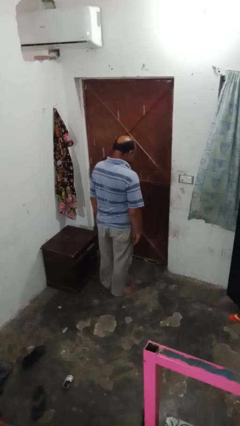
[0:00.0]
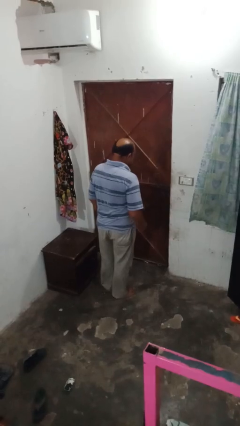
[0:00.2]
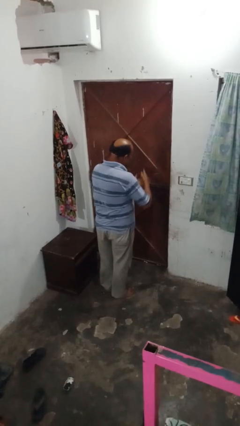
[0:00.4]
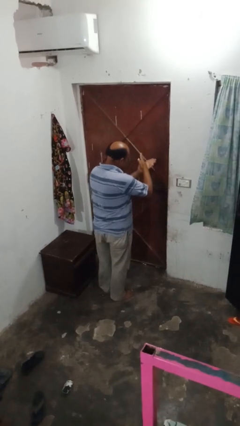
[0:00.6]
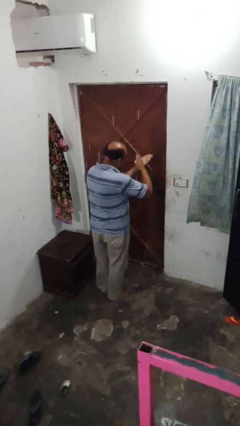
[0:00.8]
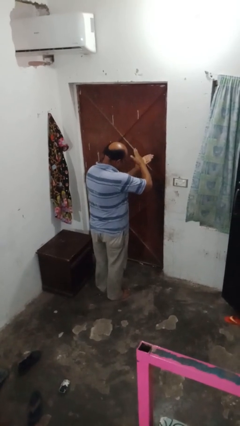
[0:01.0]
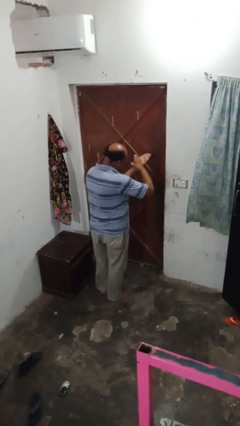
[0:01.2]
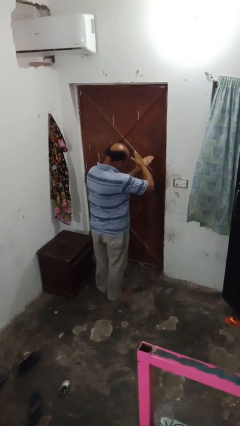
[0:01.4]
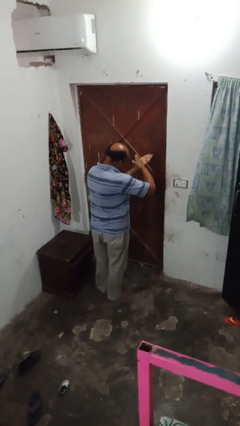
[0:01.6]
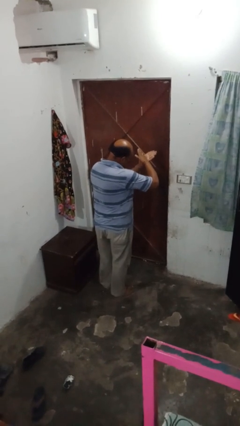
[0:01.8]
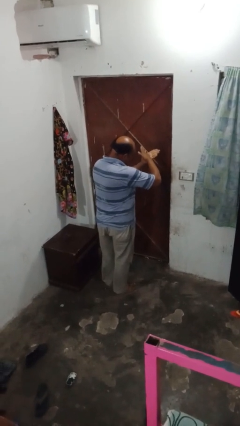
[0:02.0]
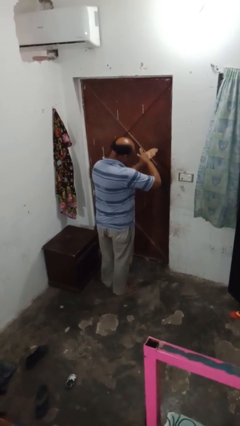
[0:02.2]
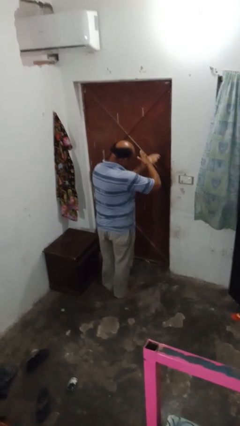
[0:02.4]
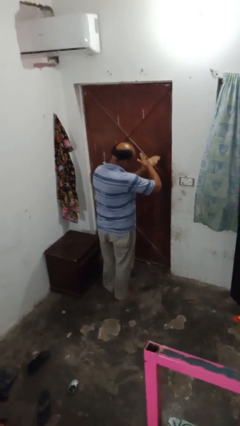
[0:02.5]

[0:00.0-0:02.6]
person gestures cut

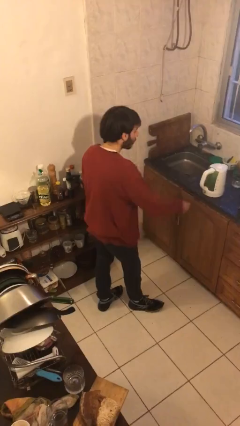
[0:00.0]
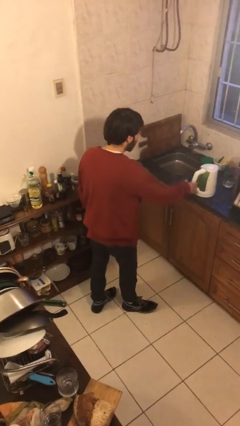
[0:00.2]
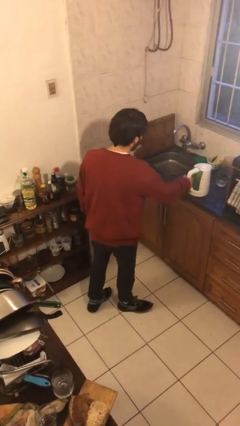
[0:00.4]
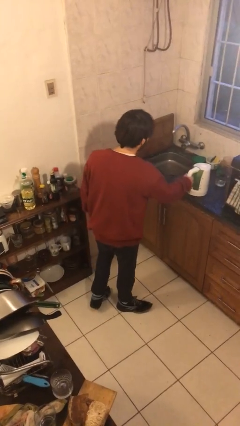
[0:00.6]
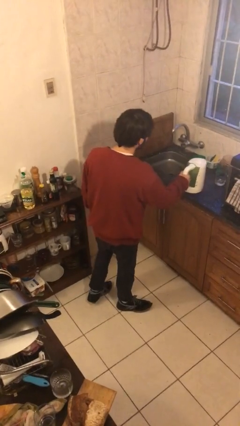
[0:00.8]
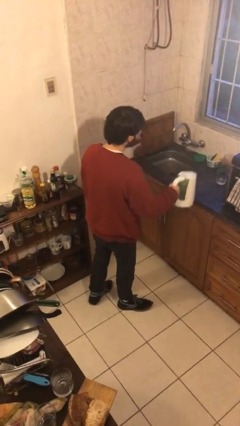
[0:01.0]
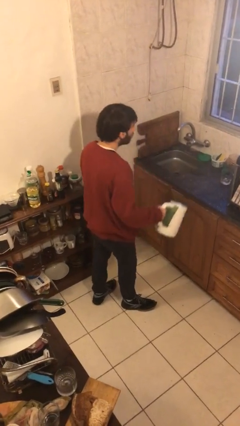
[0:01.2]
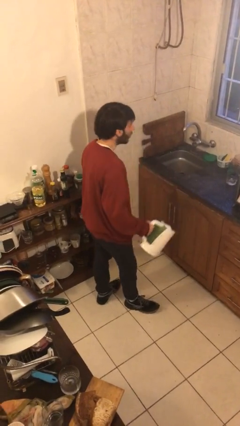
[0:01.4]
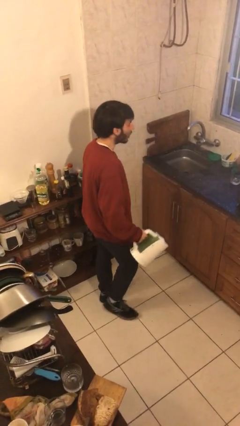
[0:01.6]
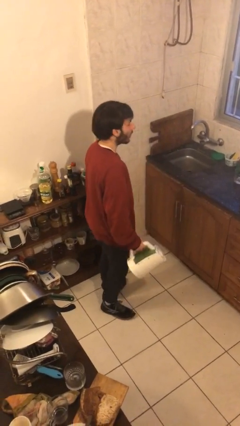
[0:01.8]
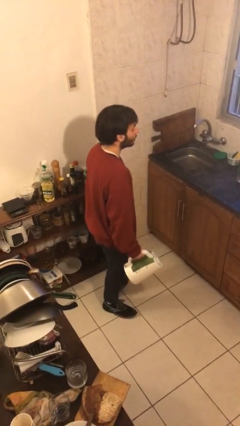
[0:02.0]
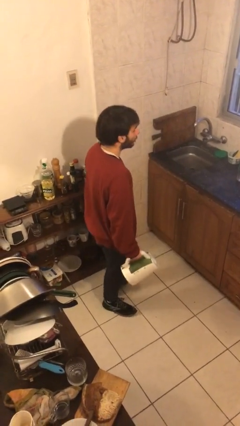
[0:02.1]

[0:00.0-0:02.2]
person picks up object from countertop

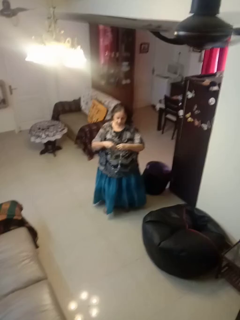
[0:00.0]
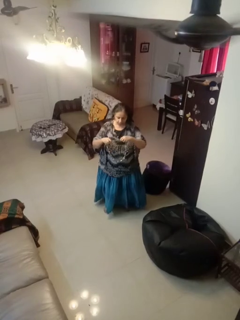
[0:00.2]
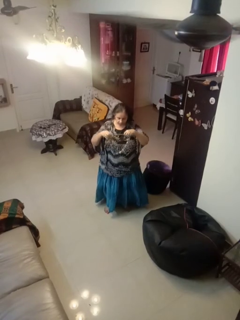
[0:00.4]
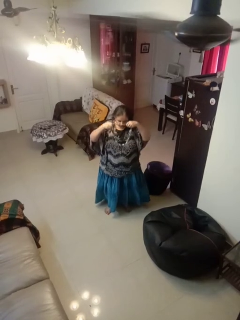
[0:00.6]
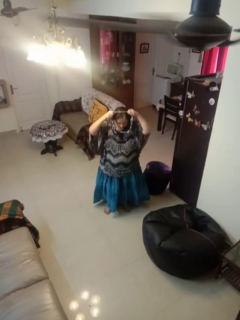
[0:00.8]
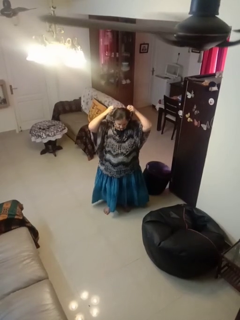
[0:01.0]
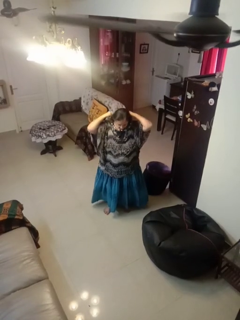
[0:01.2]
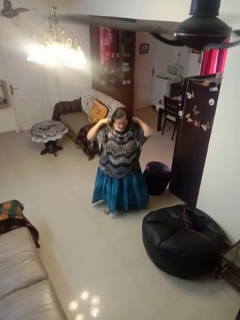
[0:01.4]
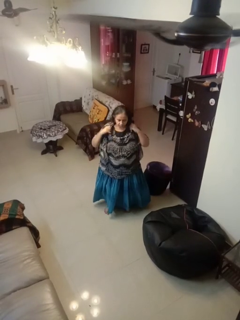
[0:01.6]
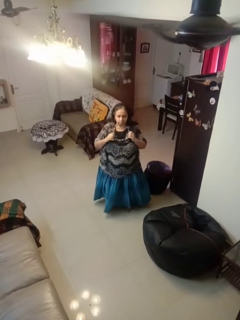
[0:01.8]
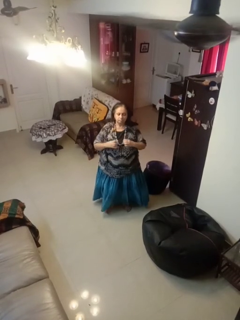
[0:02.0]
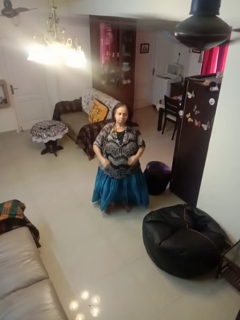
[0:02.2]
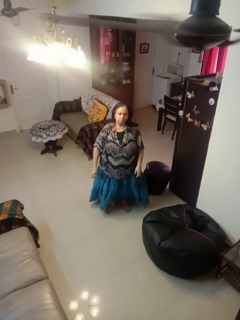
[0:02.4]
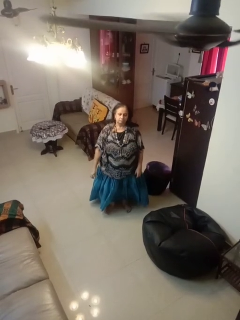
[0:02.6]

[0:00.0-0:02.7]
person puts on necklace

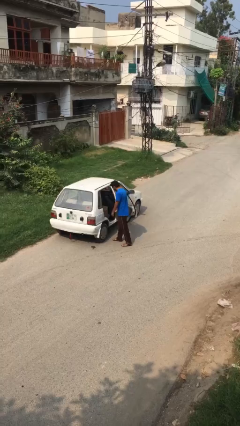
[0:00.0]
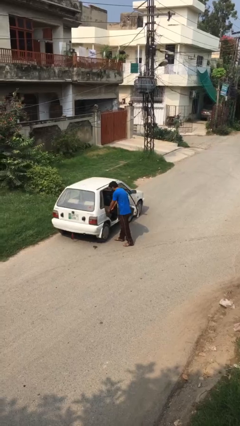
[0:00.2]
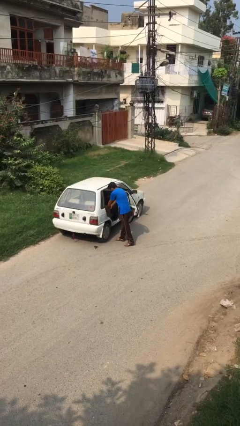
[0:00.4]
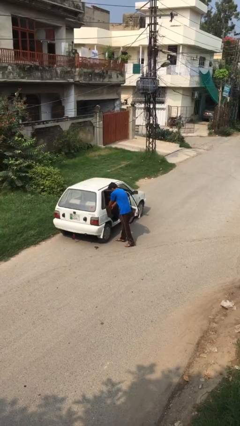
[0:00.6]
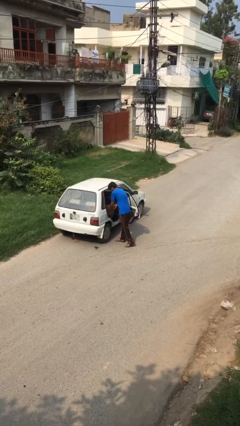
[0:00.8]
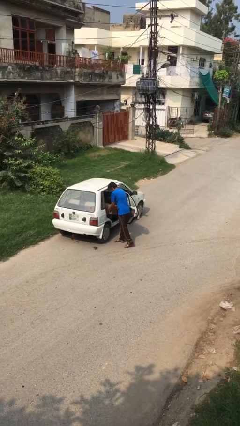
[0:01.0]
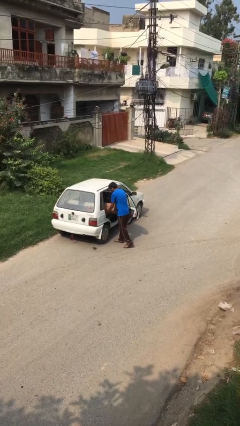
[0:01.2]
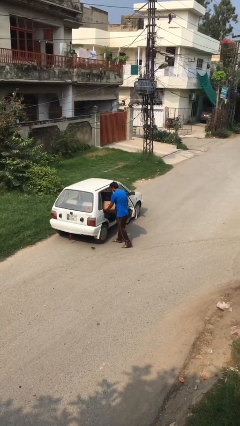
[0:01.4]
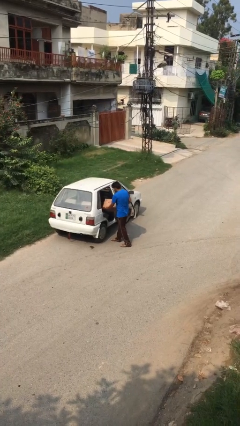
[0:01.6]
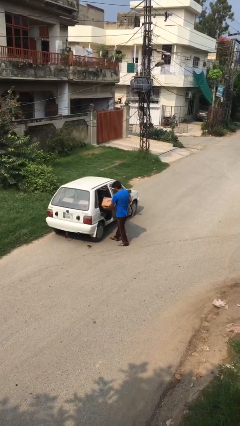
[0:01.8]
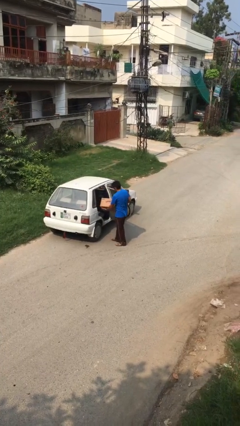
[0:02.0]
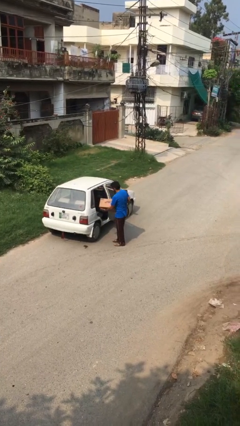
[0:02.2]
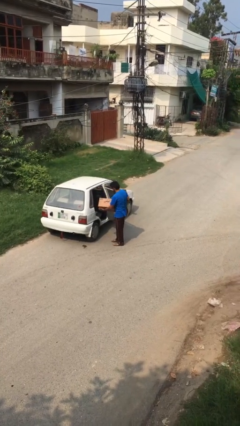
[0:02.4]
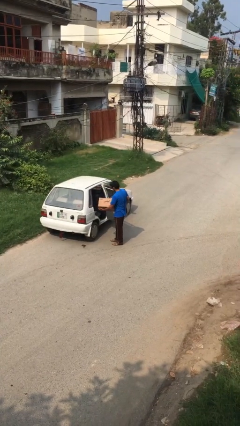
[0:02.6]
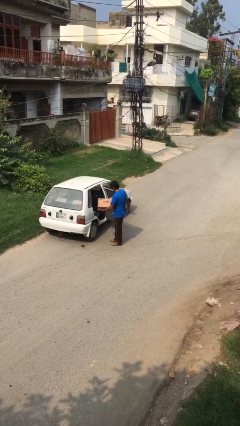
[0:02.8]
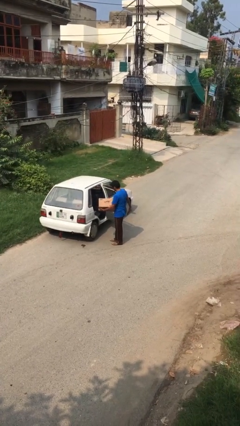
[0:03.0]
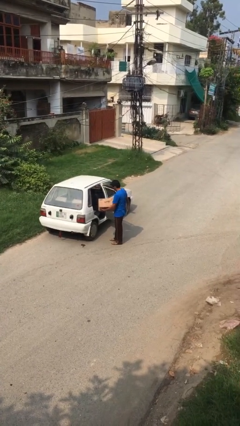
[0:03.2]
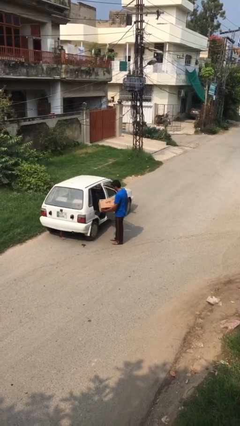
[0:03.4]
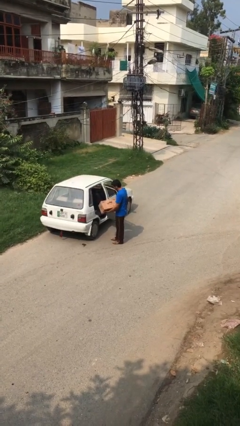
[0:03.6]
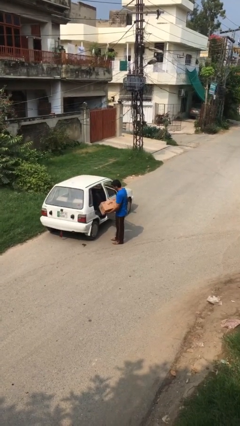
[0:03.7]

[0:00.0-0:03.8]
person unloads car

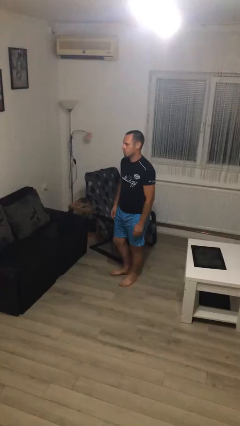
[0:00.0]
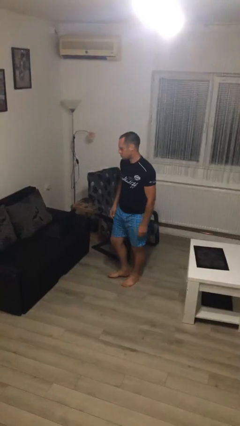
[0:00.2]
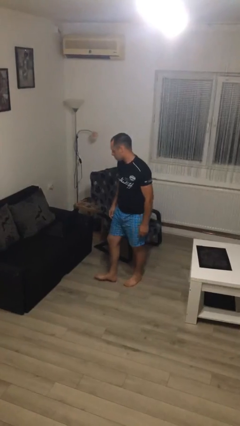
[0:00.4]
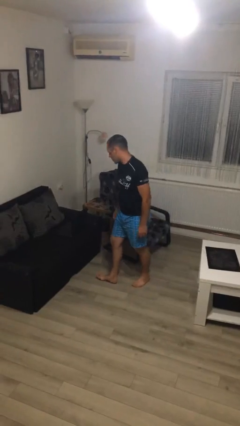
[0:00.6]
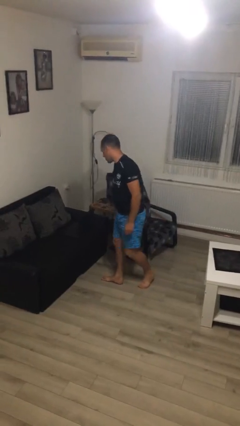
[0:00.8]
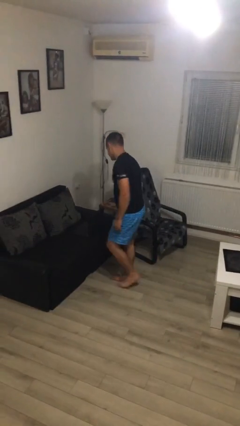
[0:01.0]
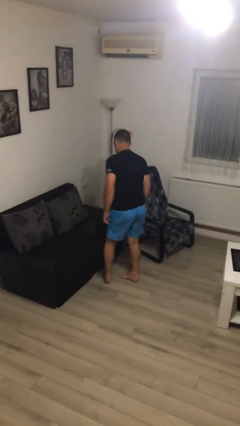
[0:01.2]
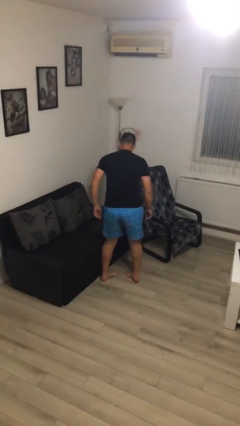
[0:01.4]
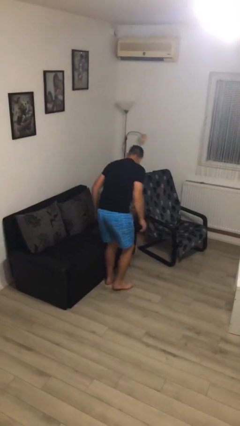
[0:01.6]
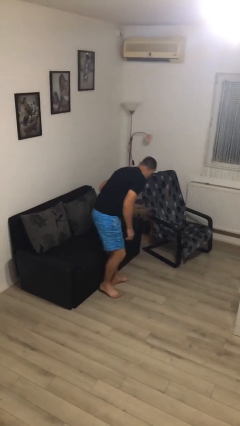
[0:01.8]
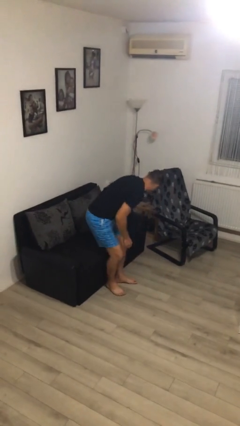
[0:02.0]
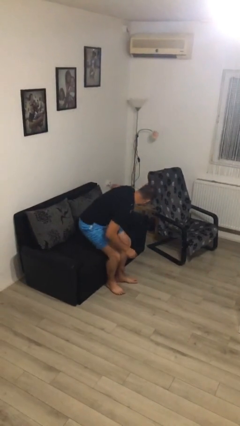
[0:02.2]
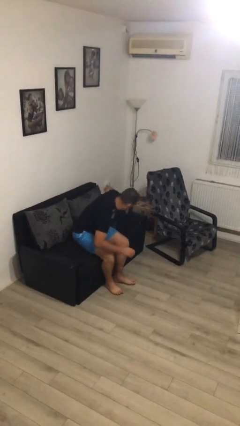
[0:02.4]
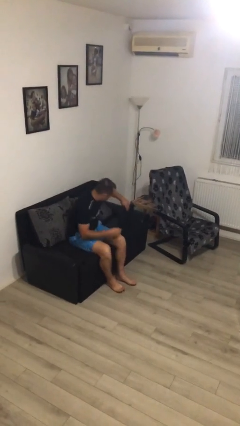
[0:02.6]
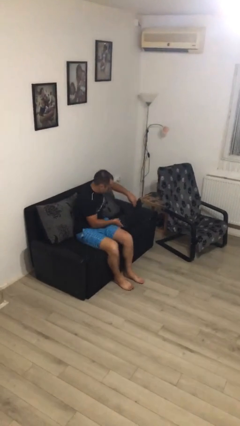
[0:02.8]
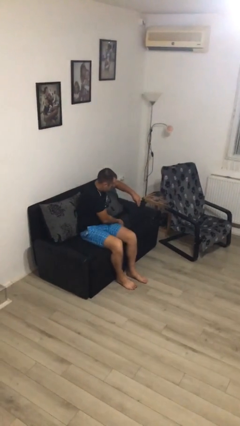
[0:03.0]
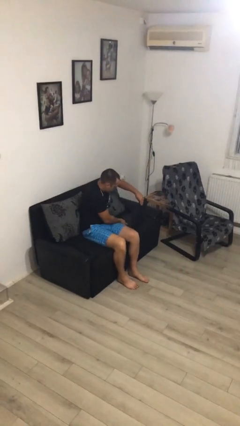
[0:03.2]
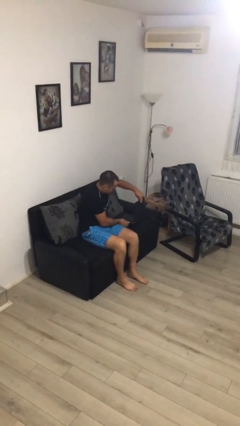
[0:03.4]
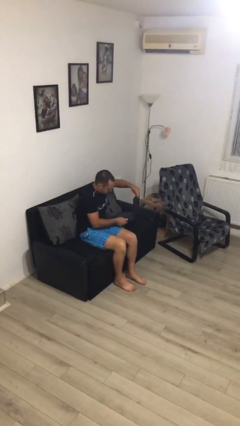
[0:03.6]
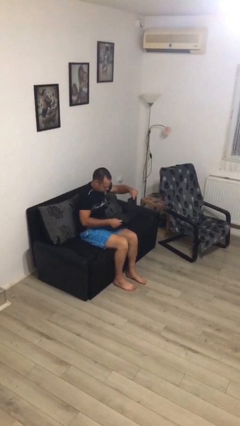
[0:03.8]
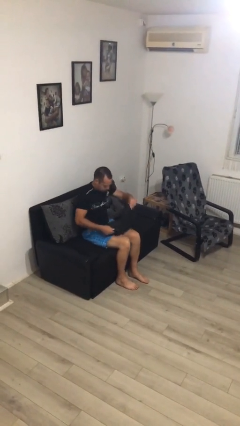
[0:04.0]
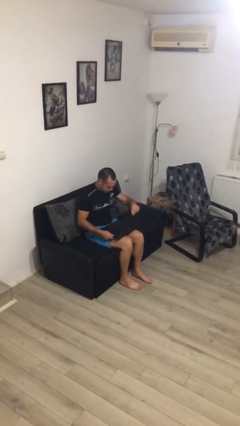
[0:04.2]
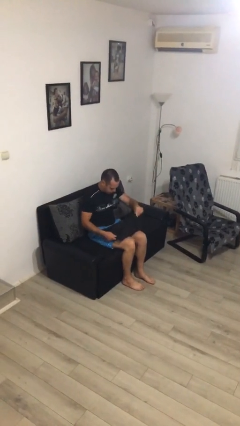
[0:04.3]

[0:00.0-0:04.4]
person sits down

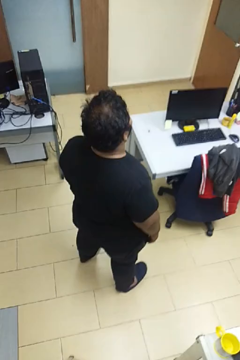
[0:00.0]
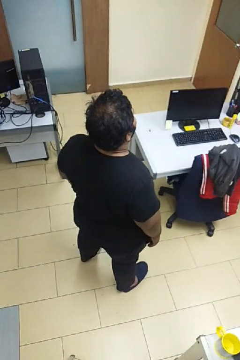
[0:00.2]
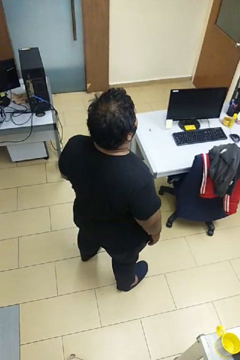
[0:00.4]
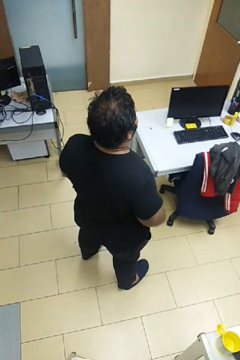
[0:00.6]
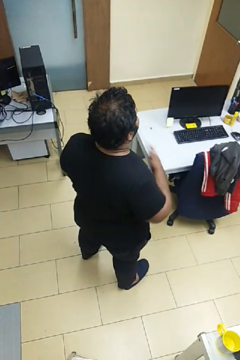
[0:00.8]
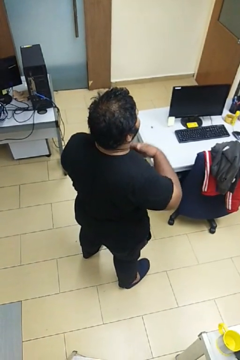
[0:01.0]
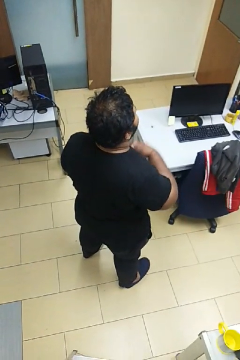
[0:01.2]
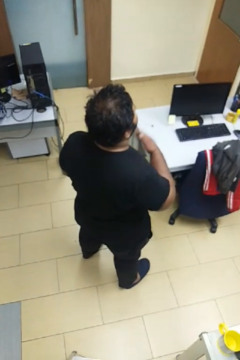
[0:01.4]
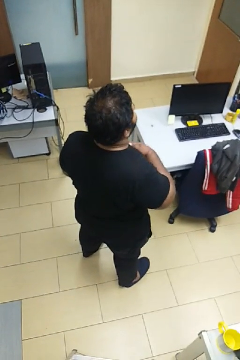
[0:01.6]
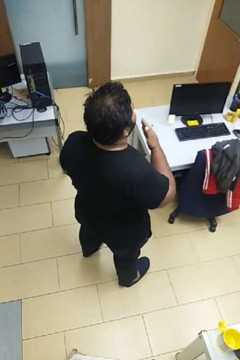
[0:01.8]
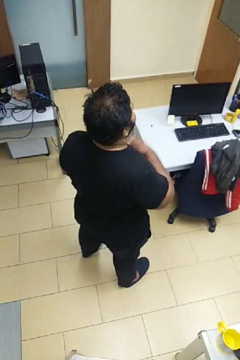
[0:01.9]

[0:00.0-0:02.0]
person drums on chest

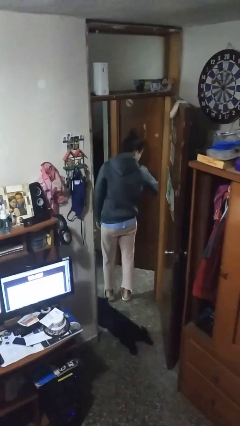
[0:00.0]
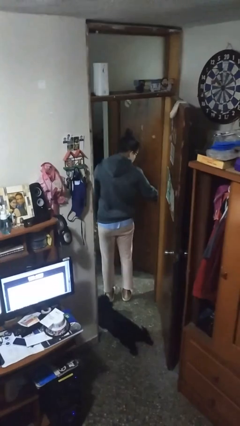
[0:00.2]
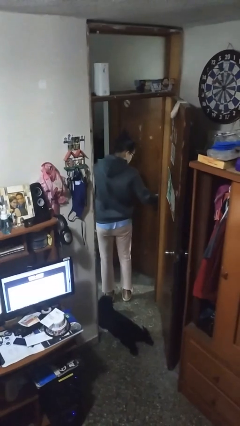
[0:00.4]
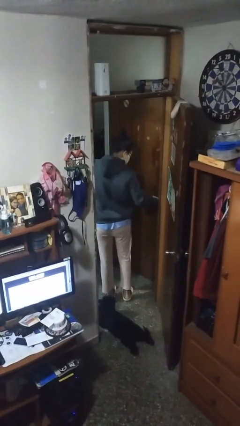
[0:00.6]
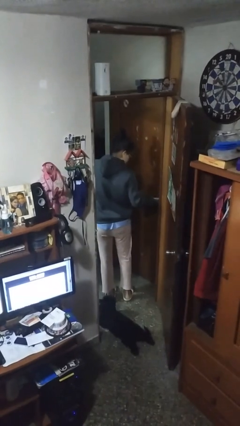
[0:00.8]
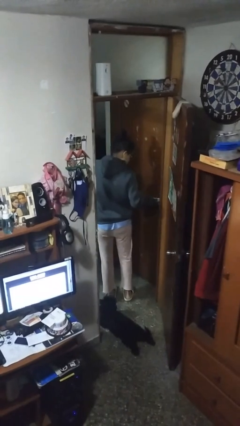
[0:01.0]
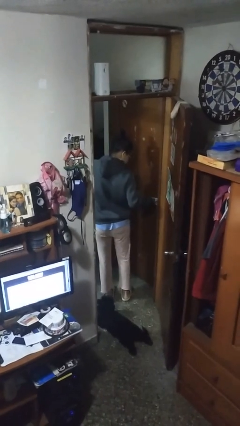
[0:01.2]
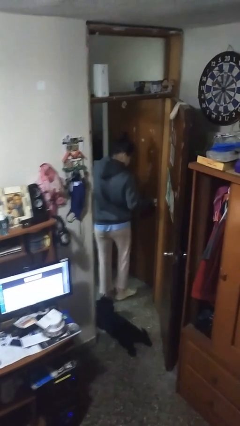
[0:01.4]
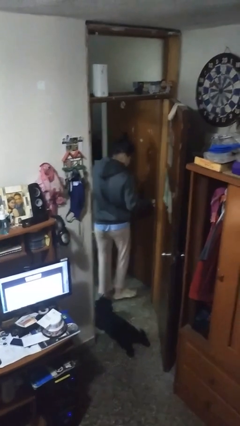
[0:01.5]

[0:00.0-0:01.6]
person closes facility door
